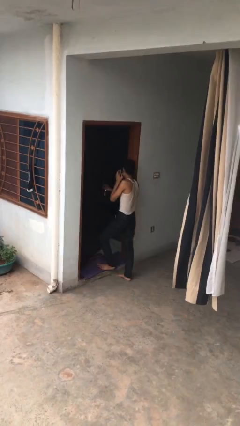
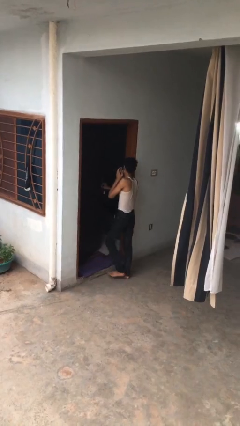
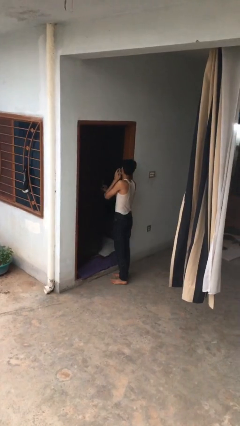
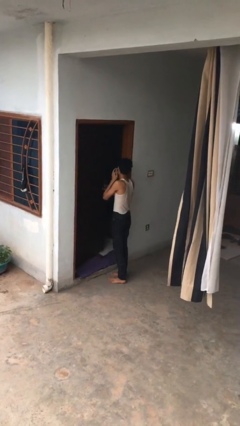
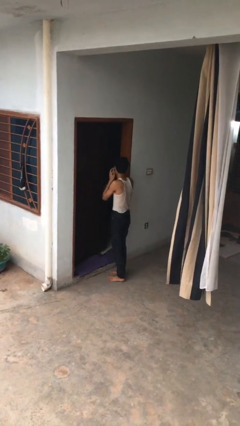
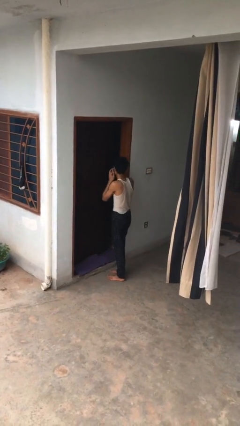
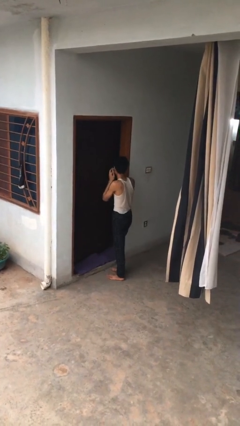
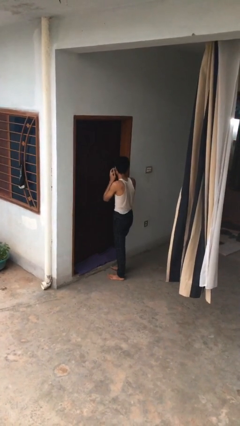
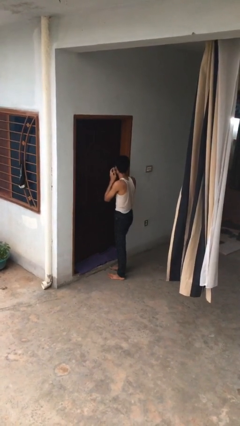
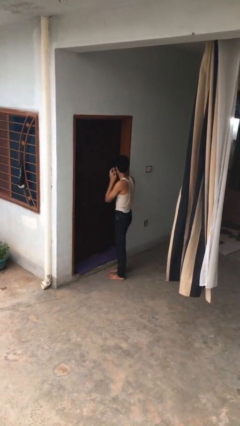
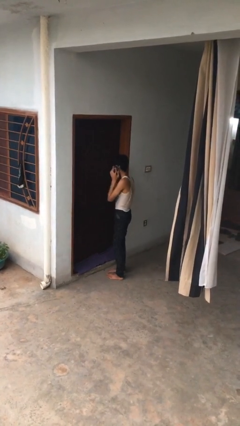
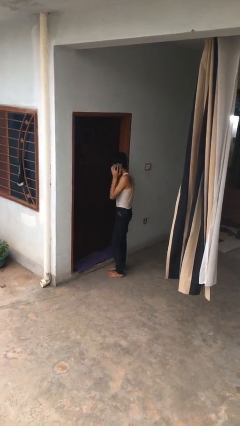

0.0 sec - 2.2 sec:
person closes facility door

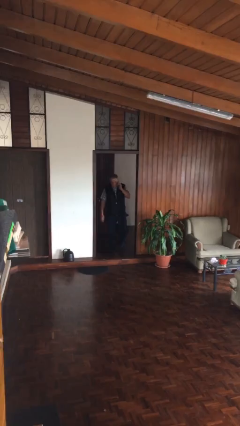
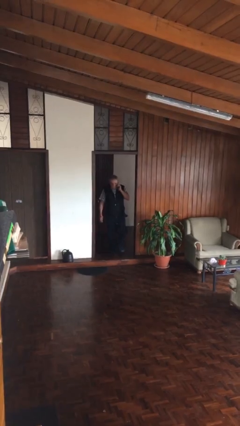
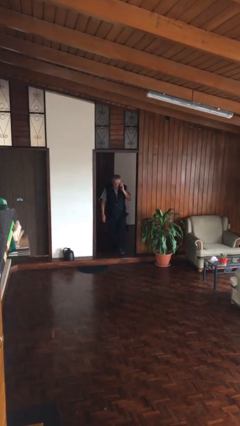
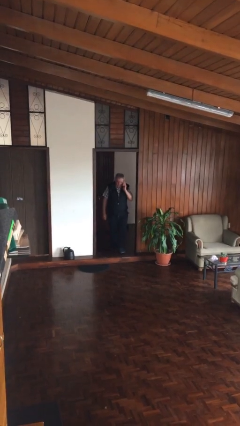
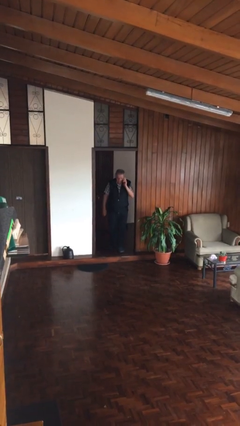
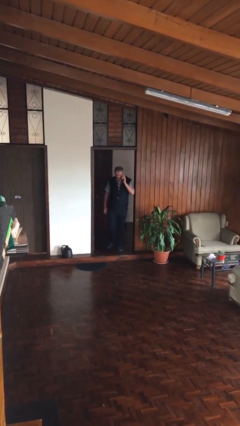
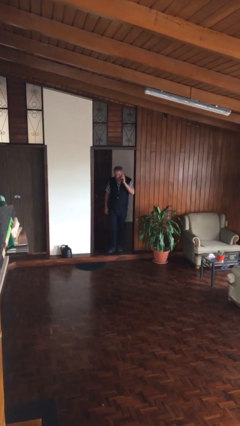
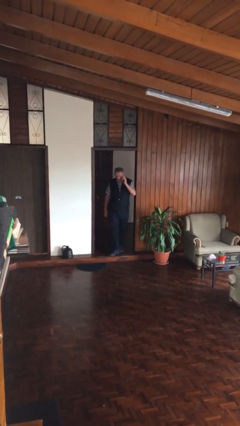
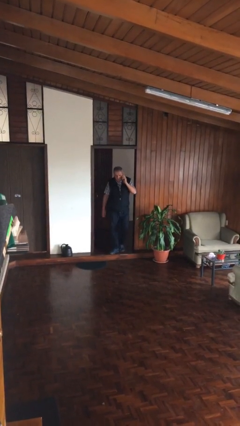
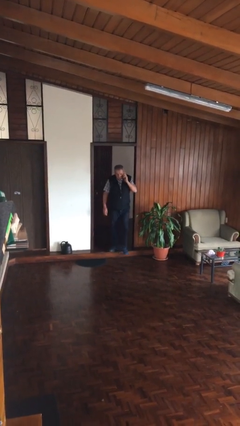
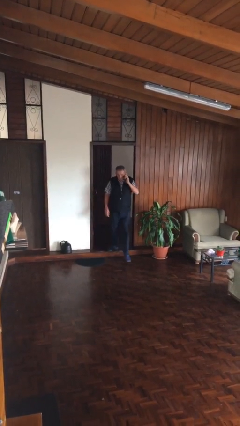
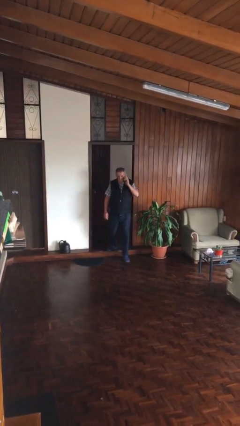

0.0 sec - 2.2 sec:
person enters scene through structure

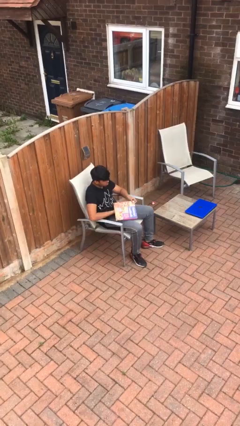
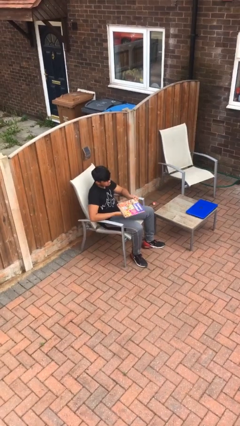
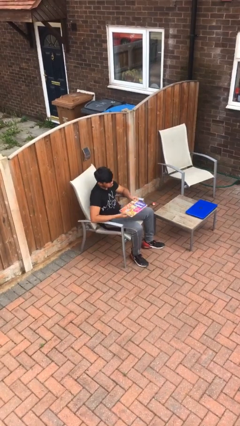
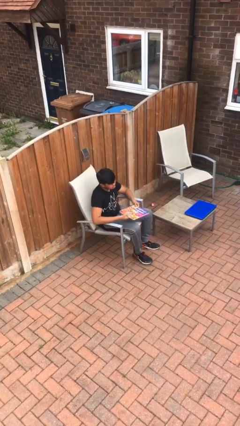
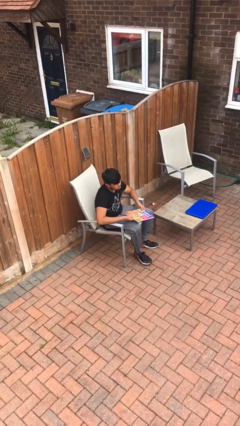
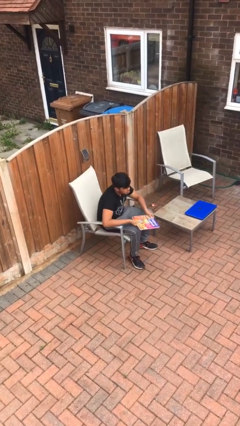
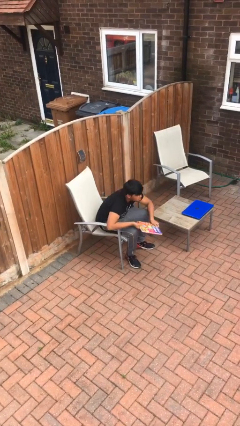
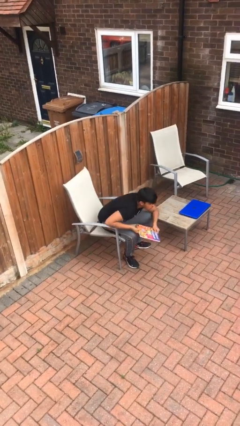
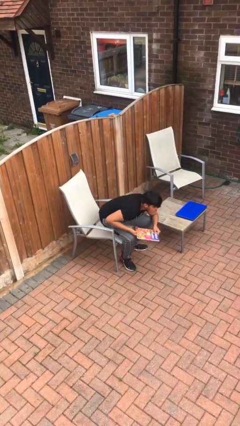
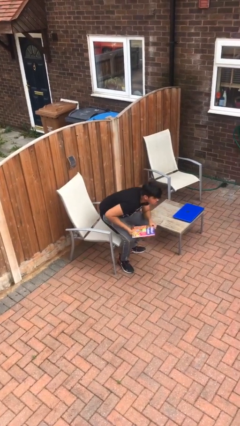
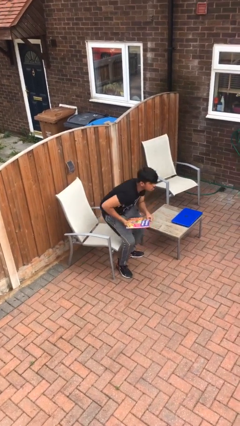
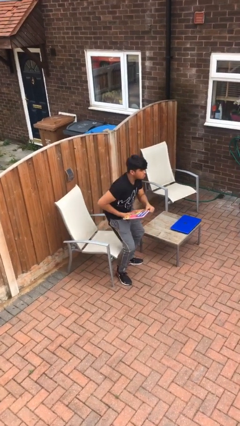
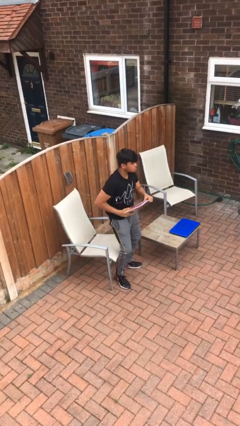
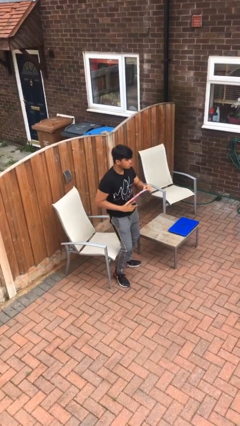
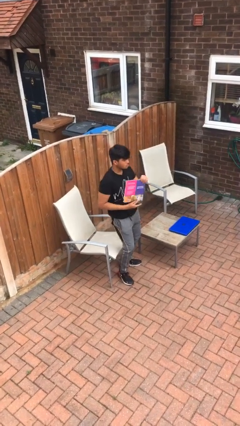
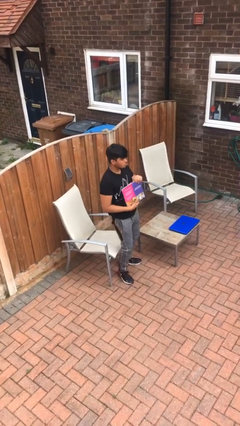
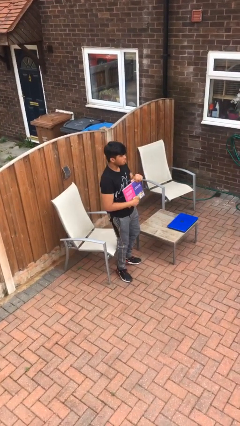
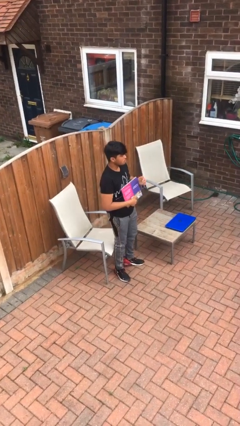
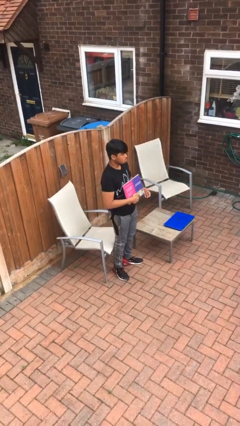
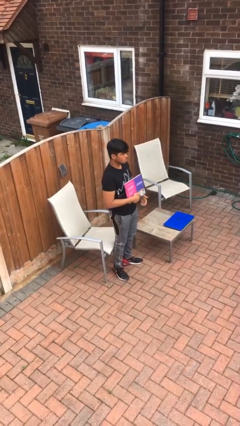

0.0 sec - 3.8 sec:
person stands up

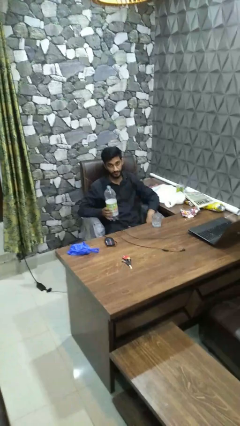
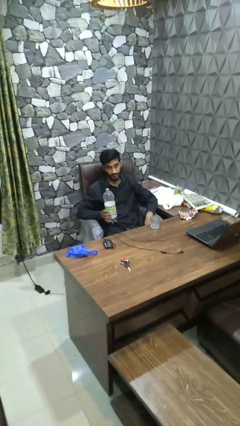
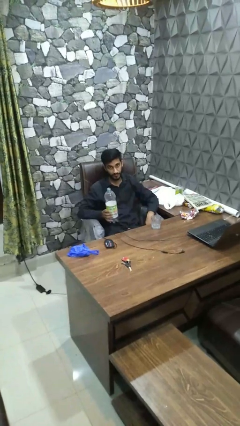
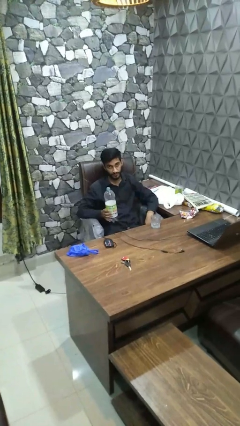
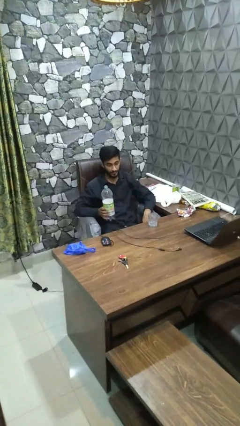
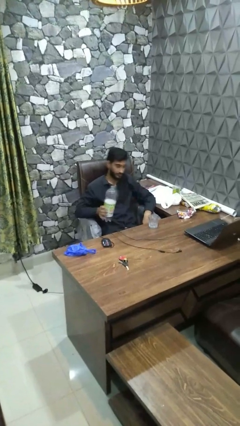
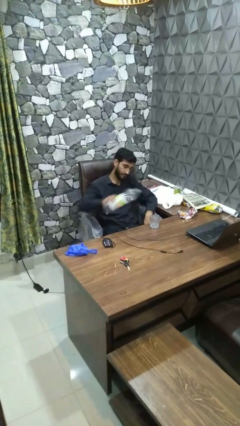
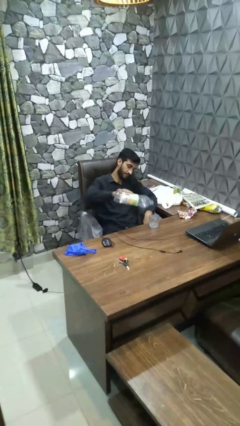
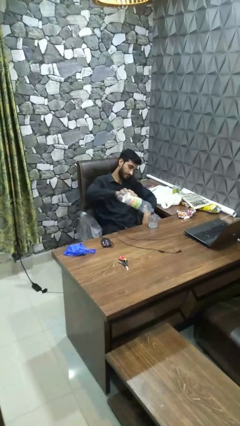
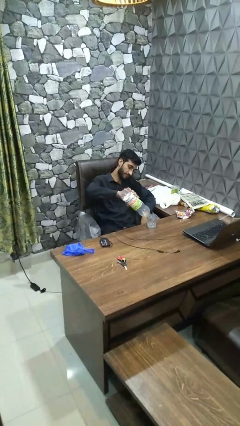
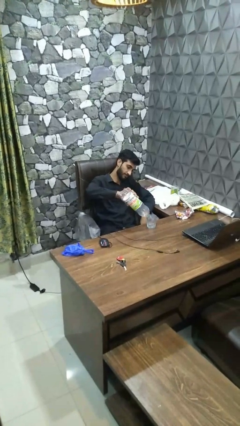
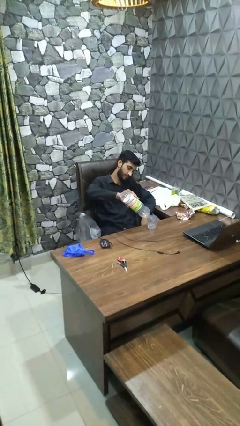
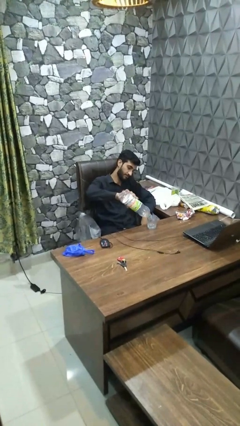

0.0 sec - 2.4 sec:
person pours liquid into cup

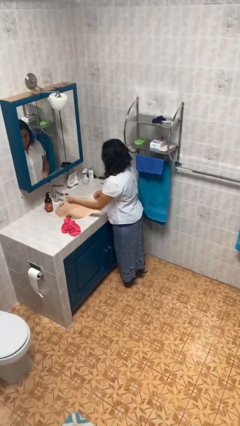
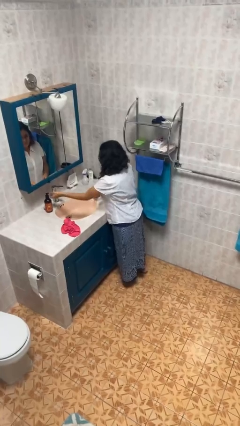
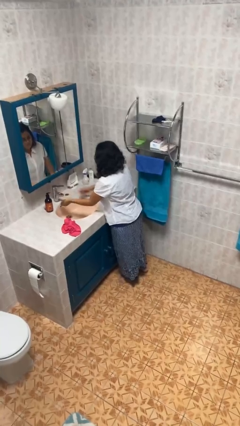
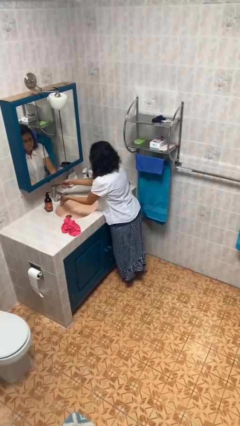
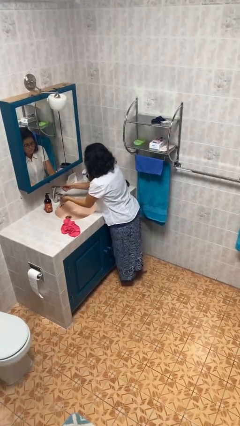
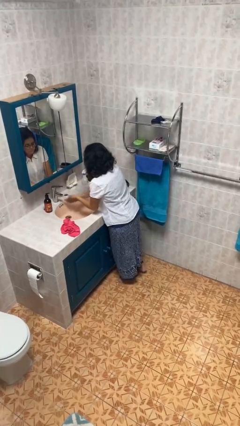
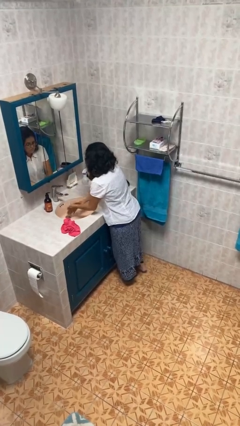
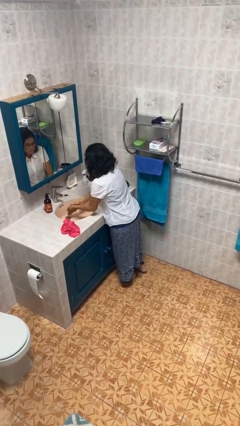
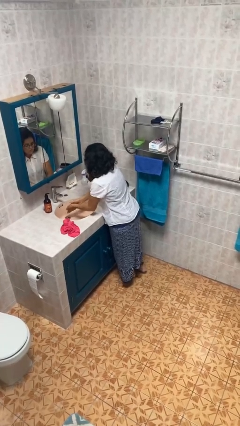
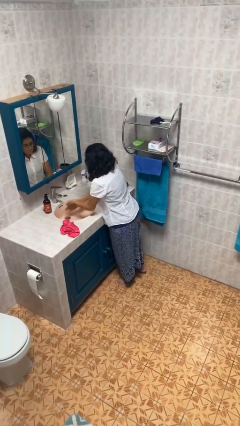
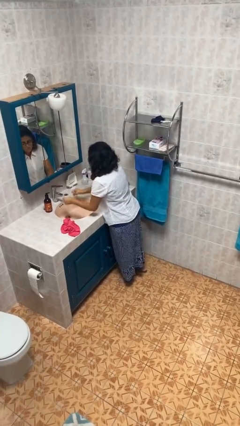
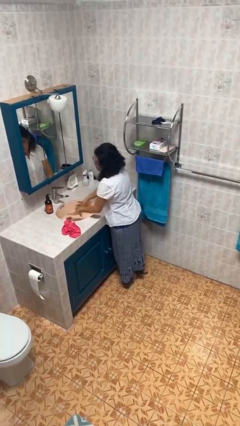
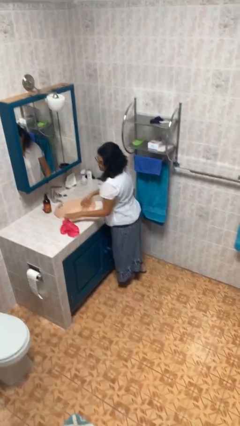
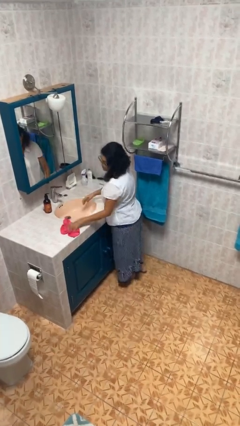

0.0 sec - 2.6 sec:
person washes hands

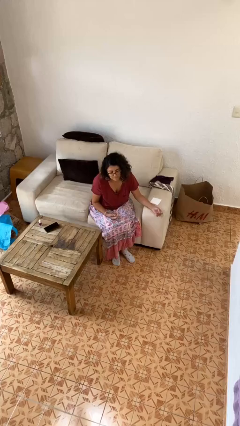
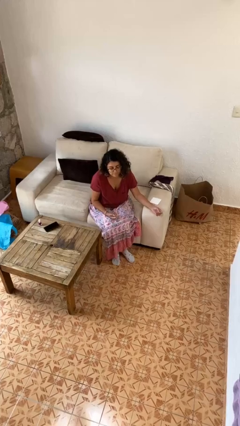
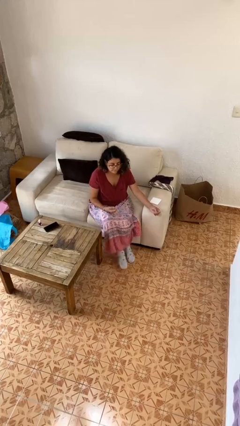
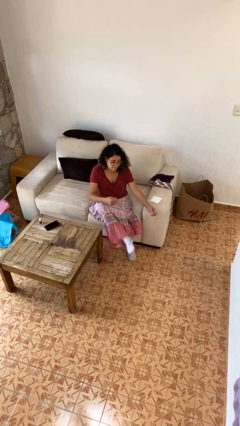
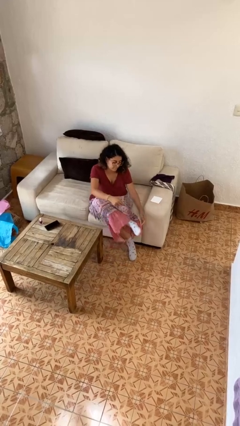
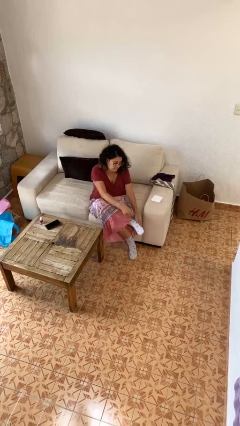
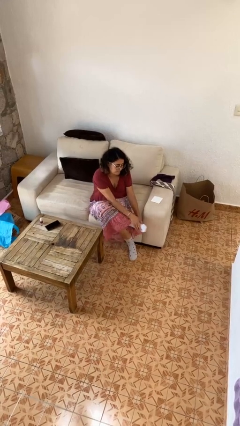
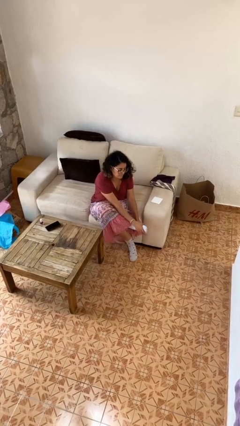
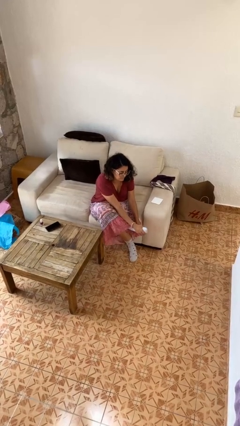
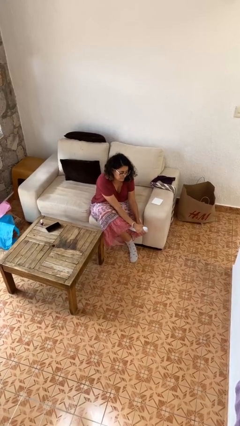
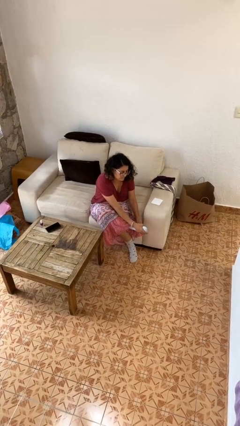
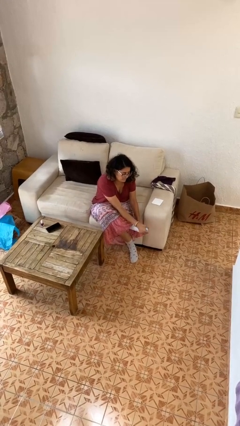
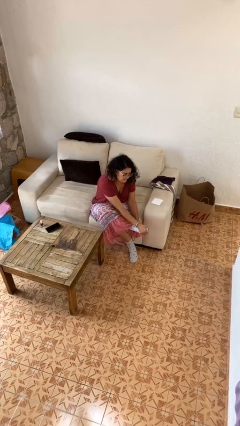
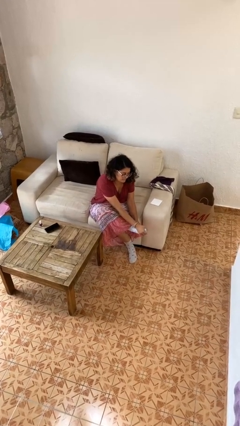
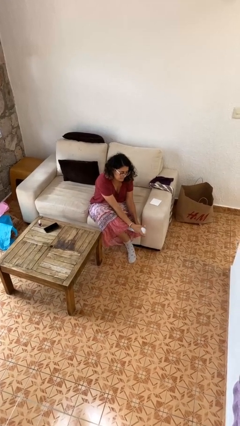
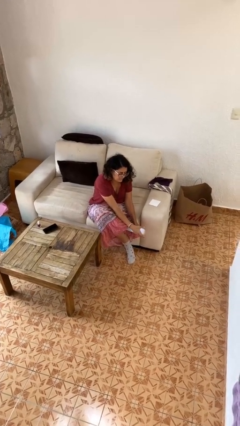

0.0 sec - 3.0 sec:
person rubs foot

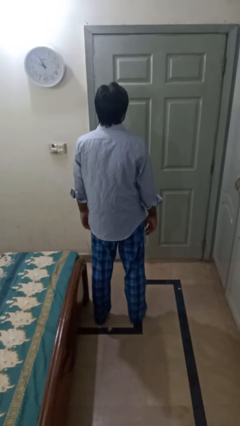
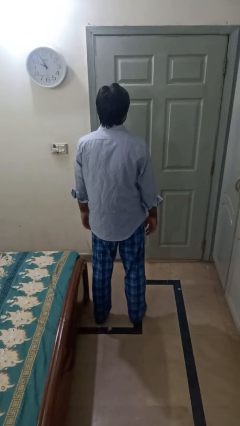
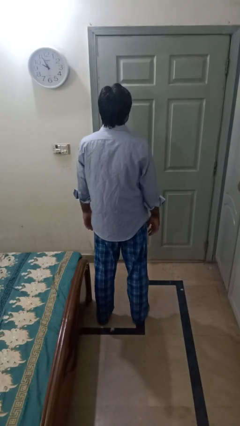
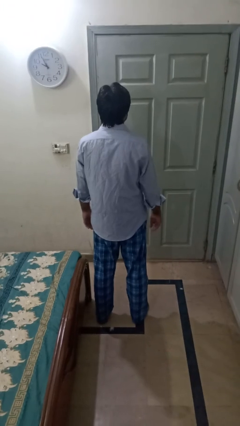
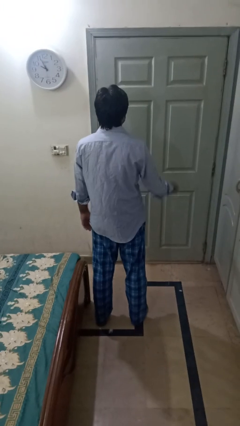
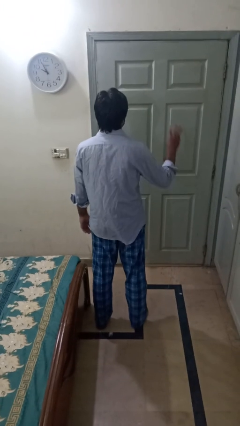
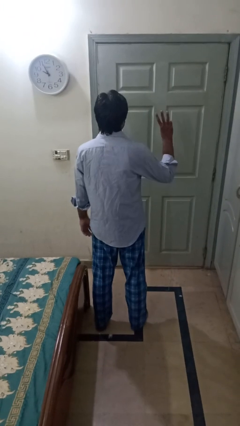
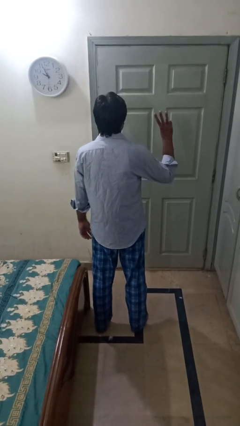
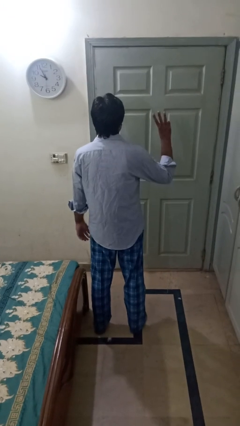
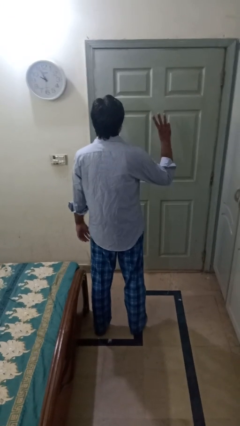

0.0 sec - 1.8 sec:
person gestures number three
